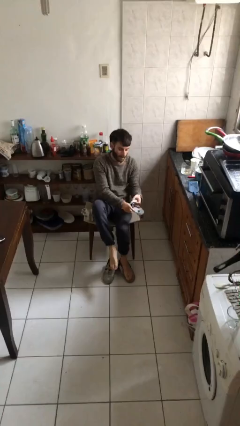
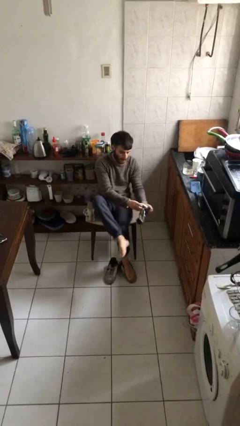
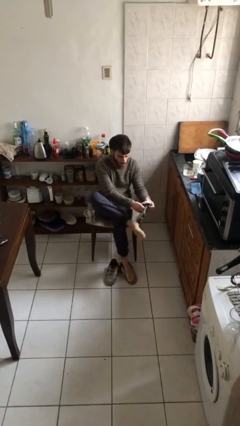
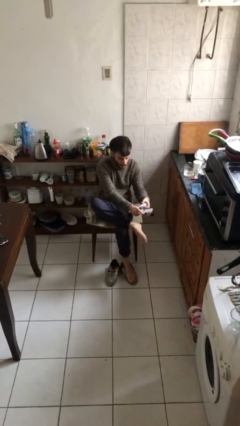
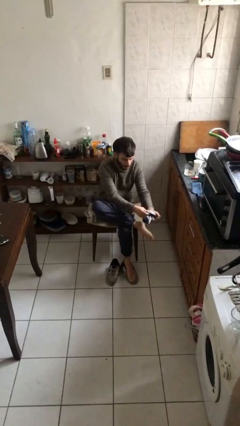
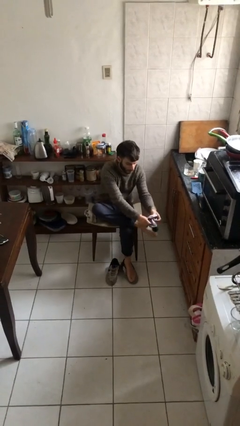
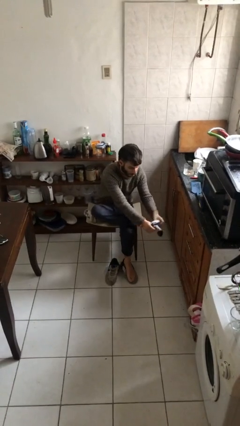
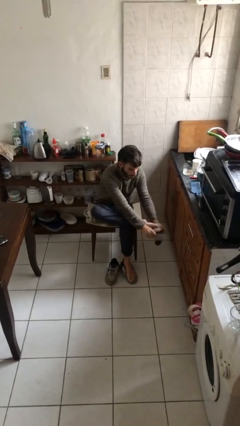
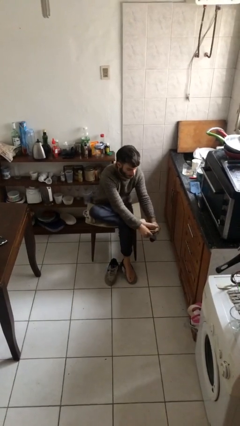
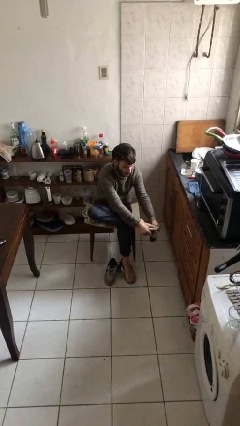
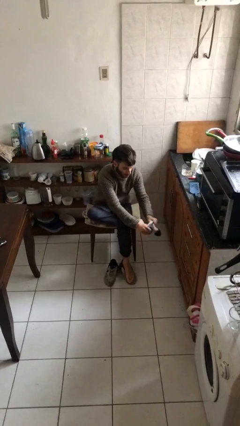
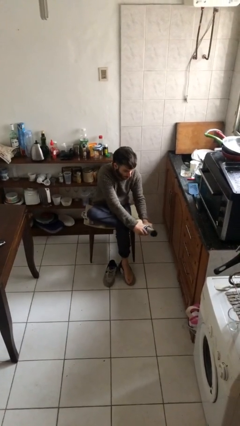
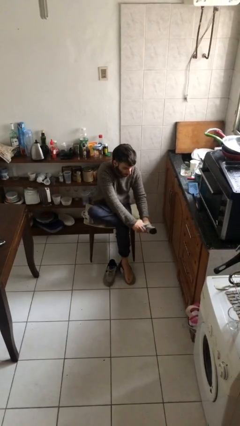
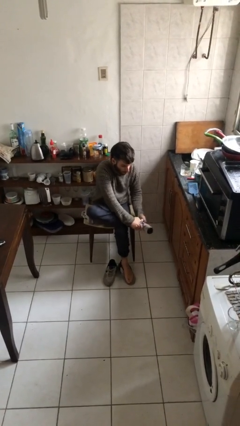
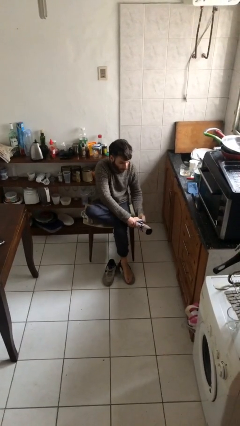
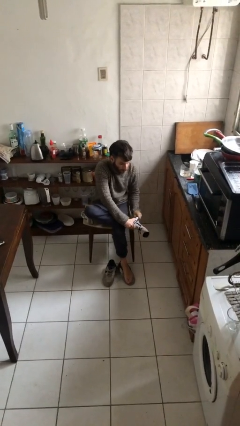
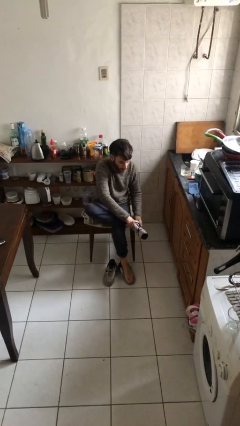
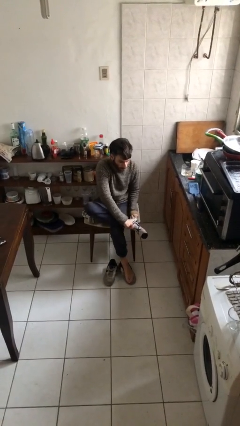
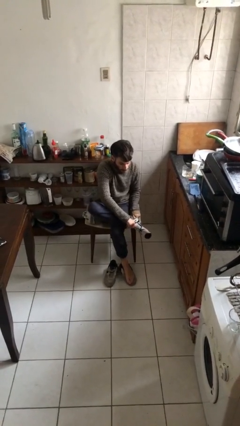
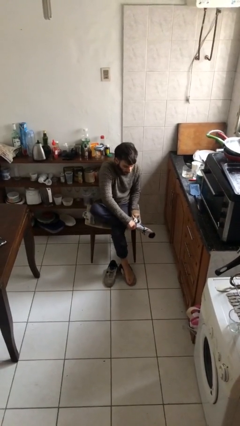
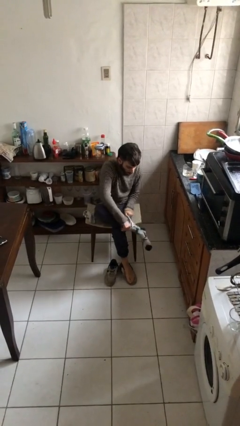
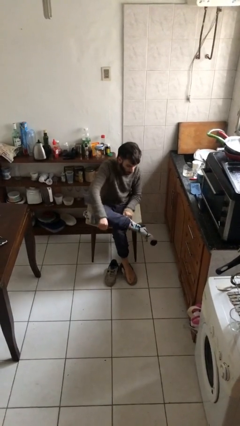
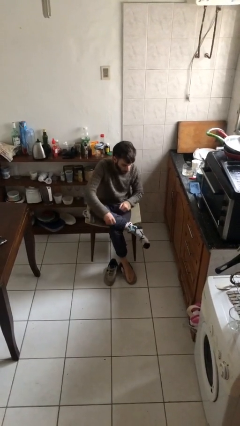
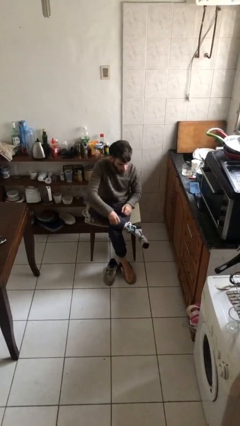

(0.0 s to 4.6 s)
person puts on socks

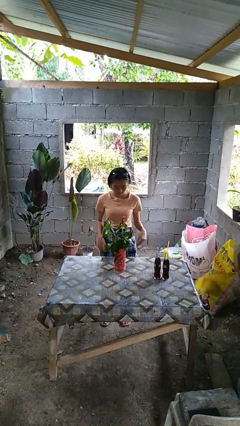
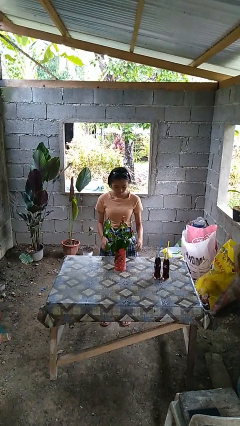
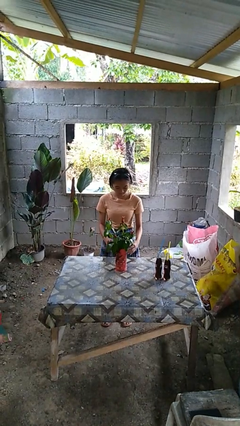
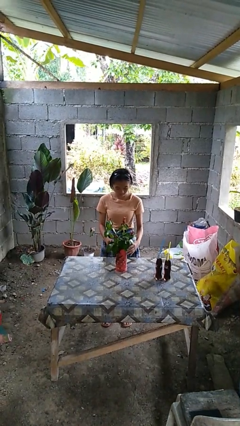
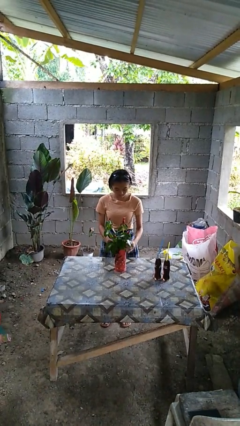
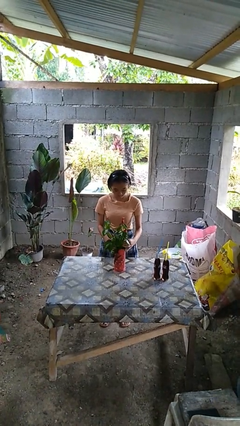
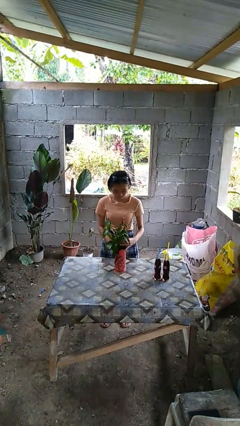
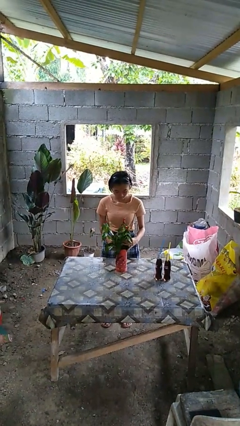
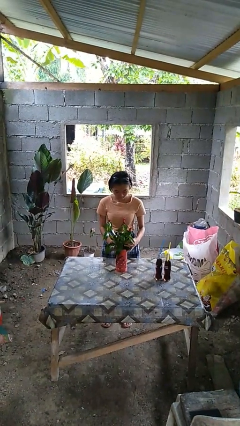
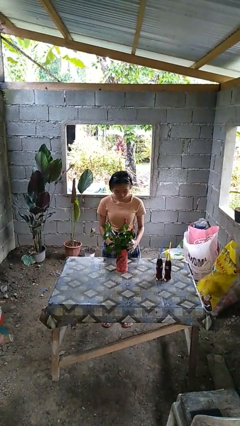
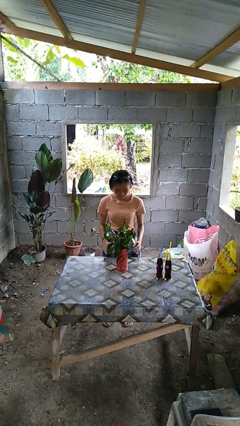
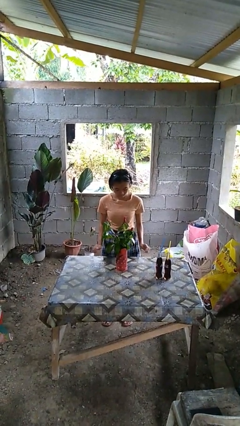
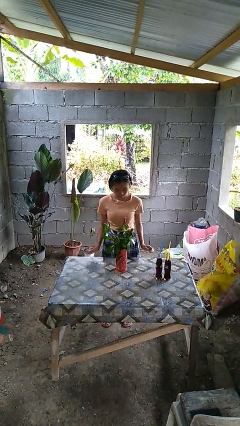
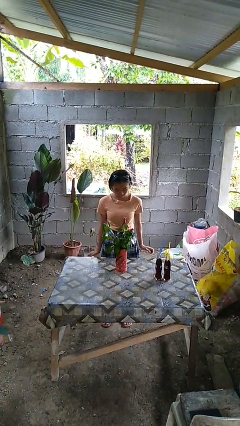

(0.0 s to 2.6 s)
person arranges flowers in vase

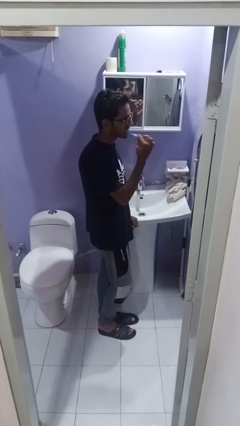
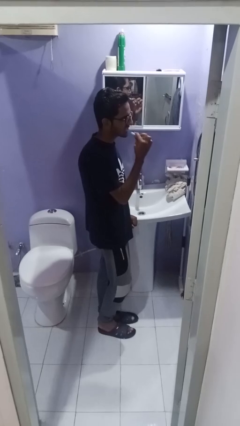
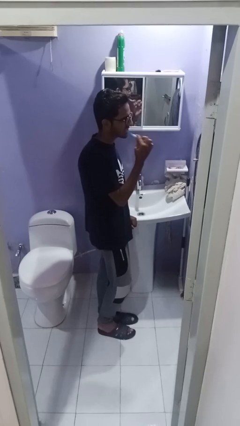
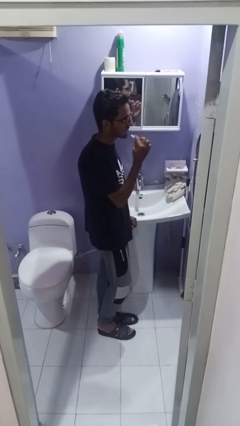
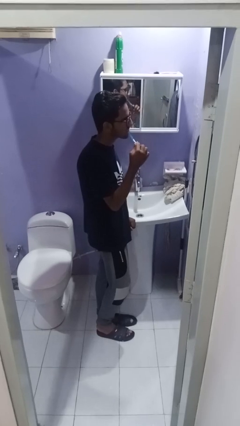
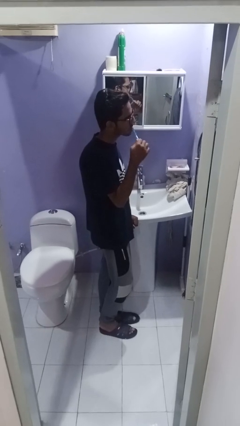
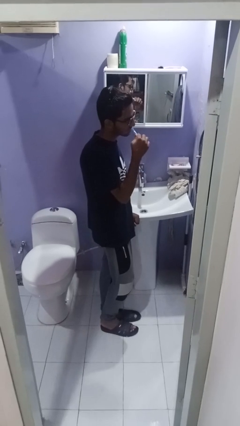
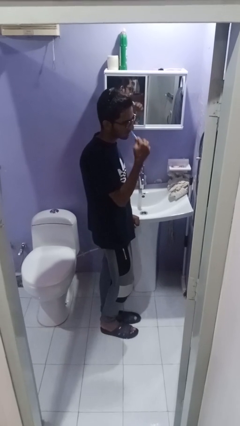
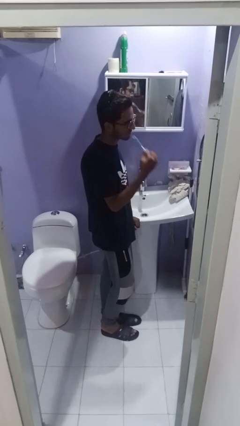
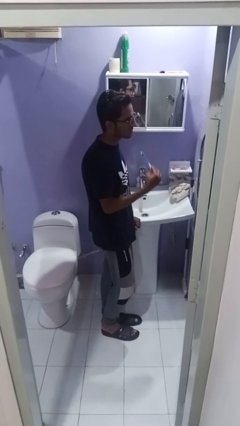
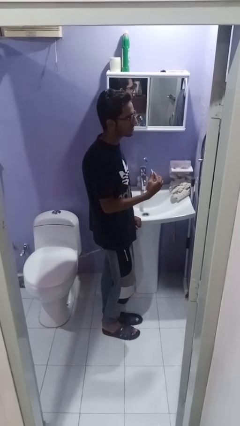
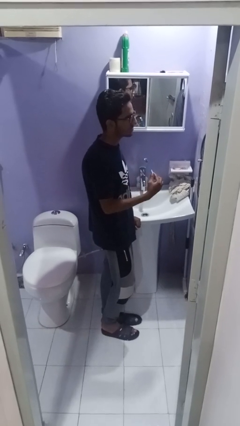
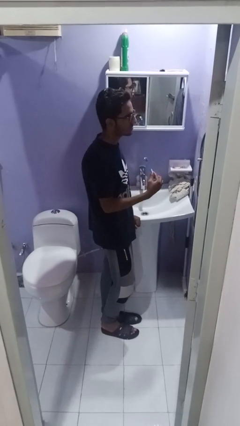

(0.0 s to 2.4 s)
person brushes teeth

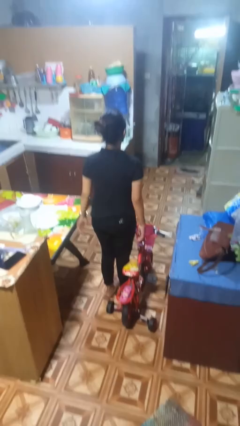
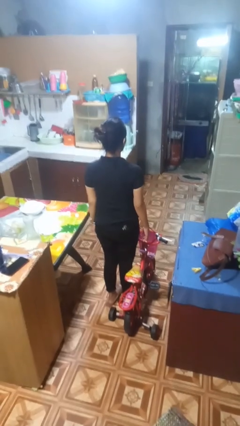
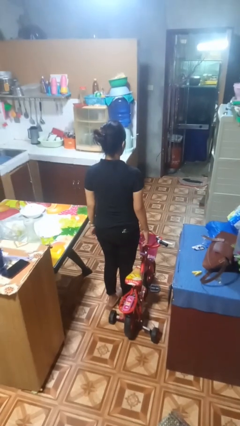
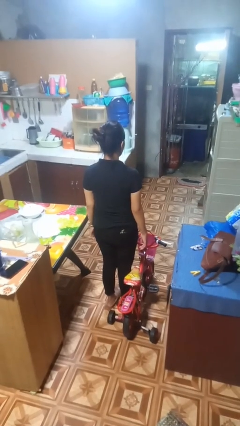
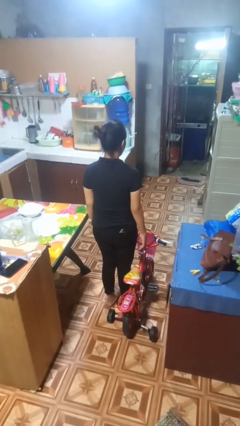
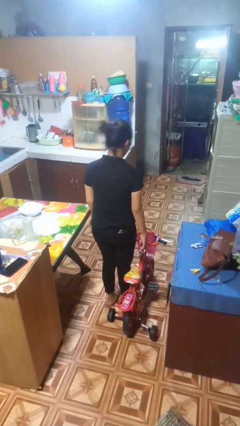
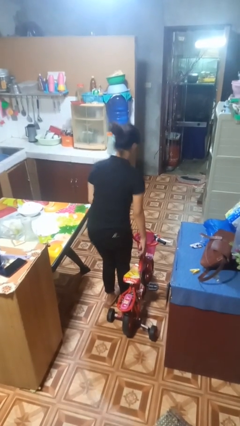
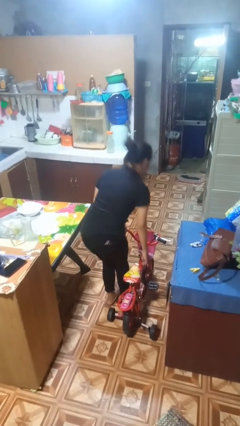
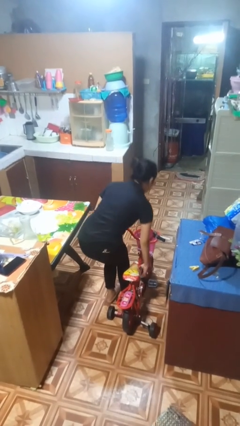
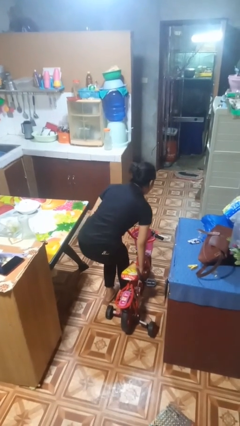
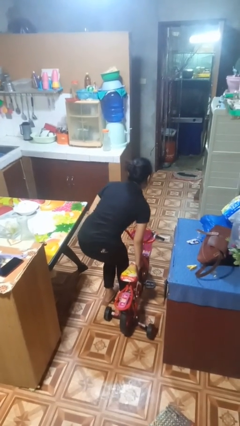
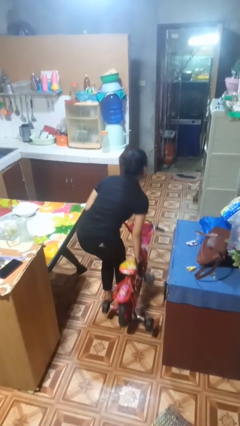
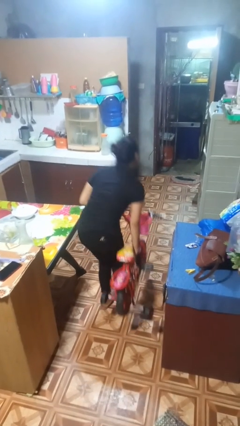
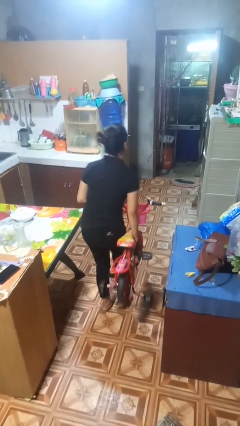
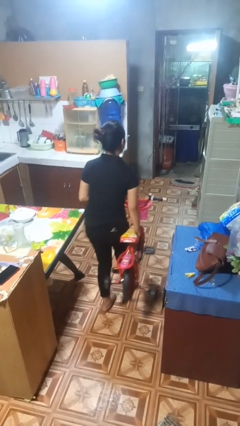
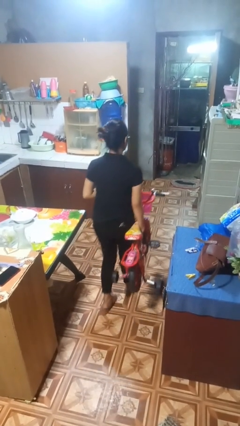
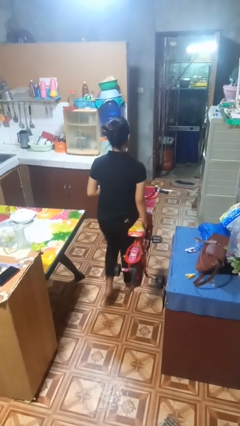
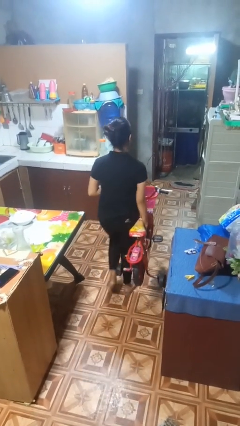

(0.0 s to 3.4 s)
person carries bicycle

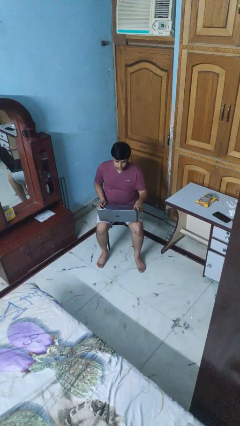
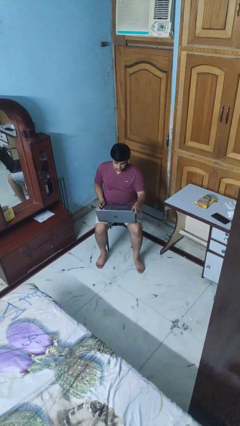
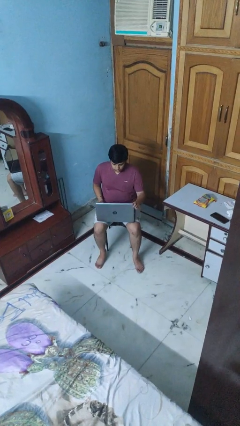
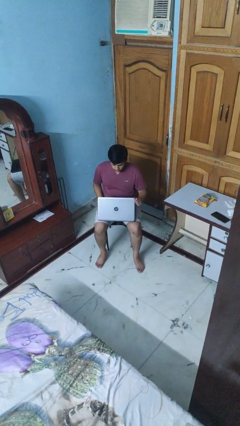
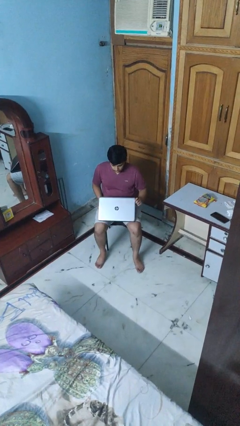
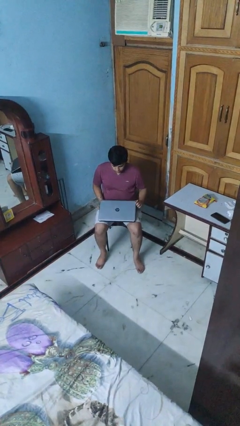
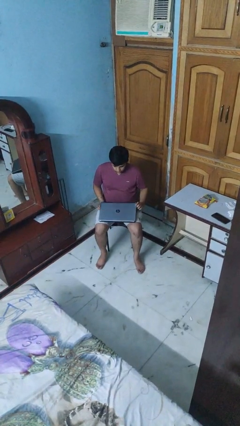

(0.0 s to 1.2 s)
person closes laptop

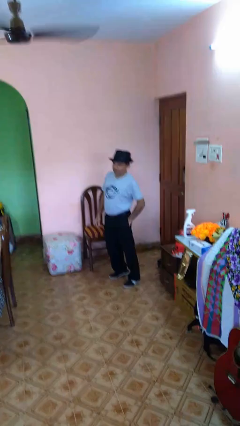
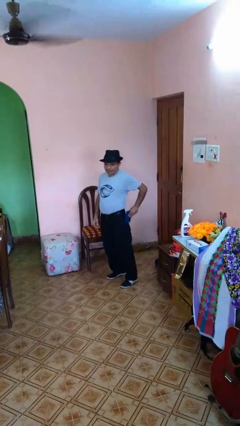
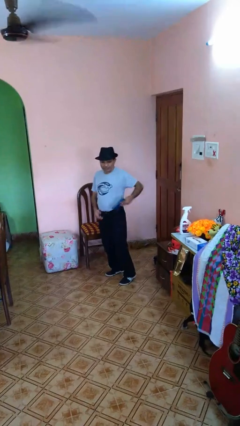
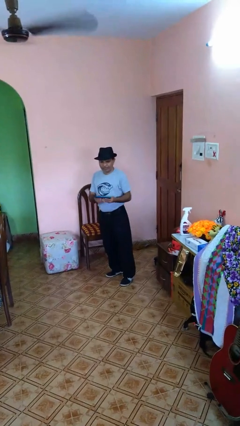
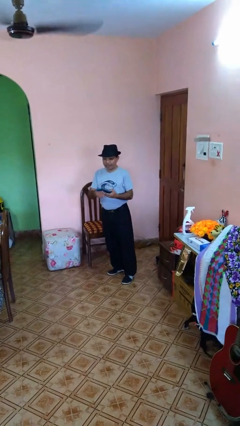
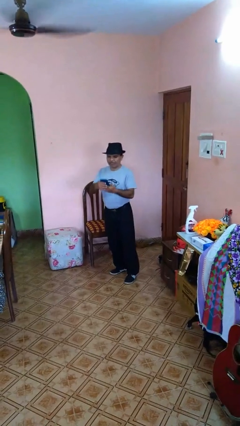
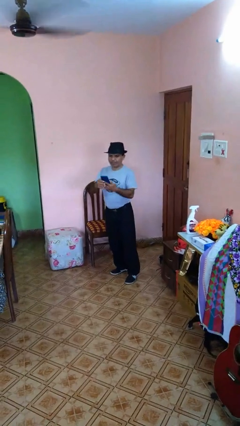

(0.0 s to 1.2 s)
person takes phone from pocket

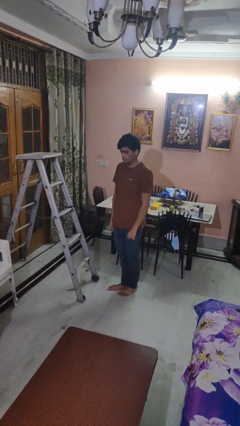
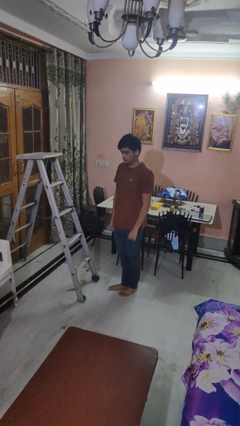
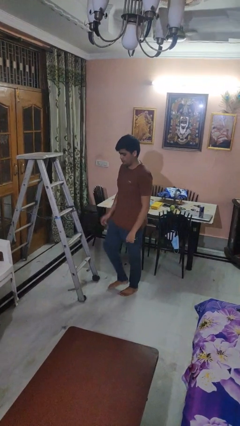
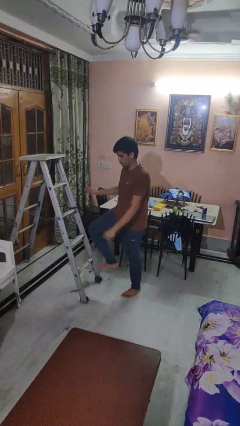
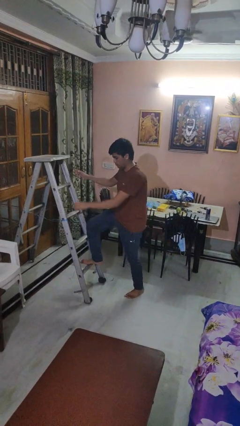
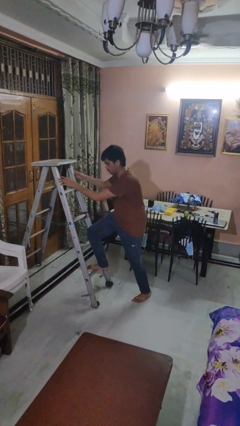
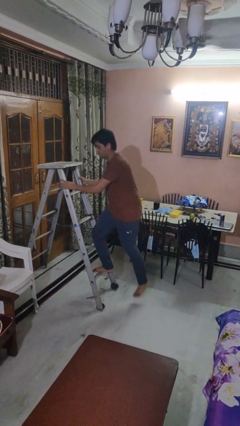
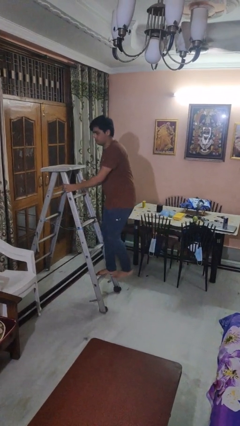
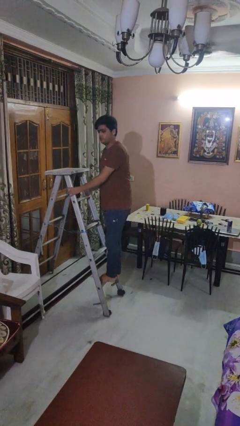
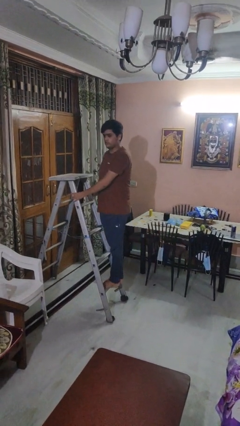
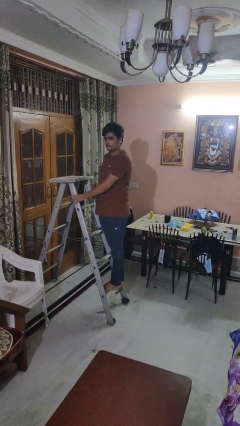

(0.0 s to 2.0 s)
person climbs up ladder
